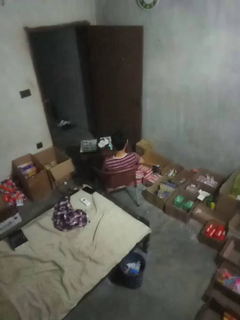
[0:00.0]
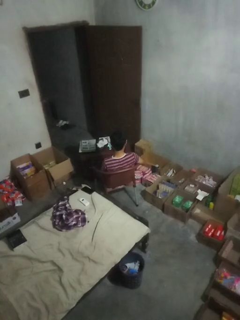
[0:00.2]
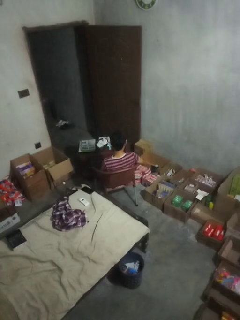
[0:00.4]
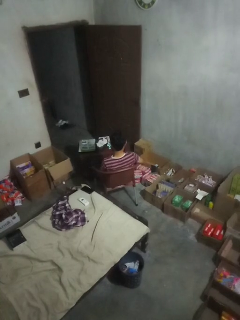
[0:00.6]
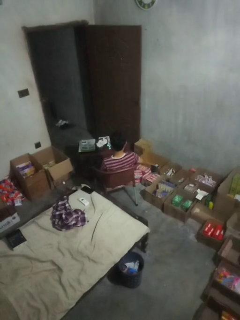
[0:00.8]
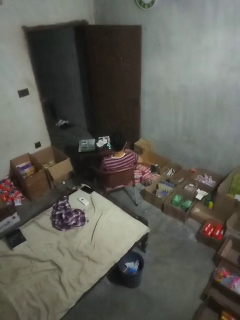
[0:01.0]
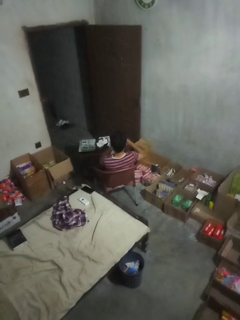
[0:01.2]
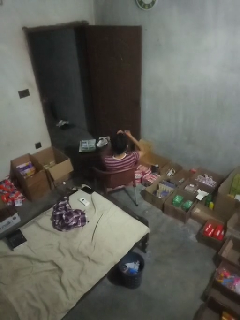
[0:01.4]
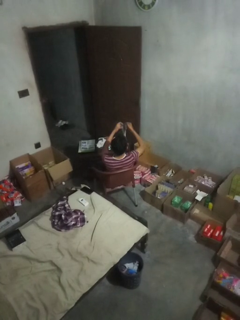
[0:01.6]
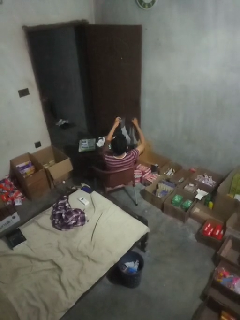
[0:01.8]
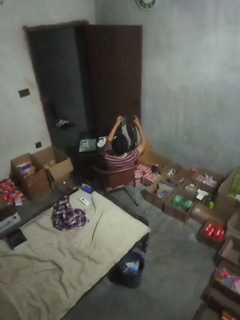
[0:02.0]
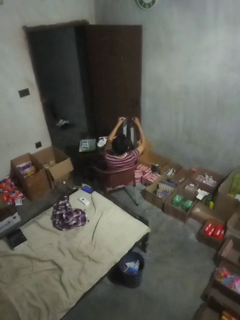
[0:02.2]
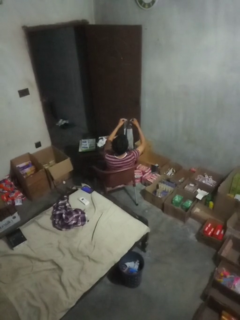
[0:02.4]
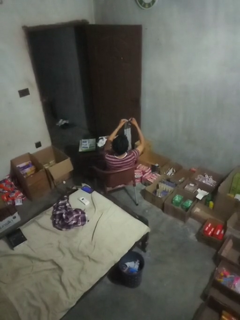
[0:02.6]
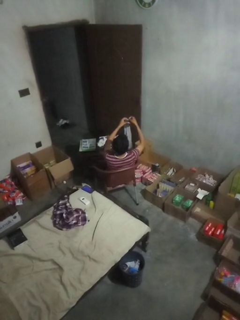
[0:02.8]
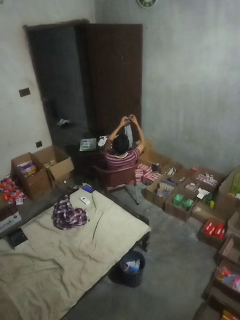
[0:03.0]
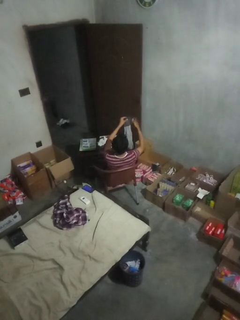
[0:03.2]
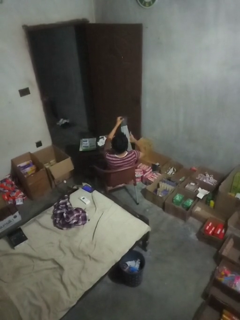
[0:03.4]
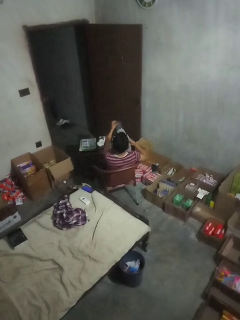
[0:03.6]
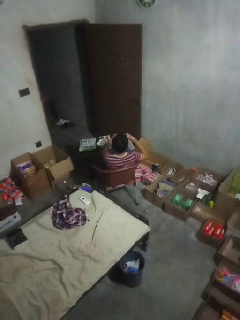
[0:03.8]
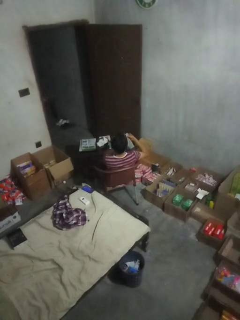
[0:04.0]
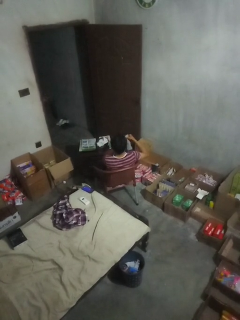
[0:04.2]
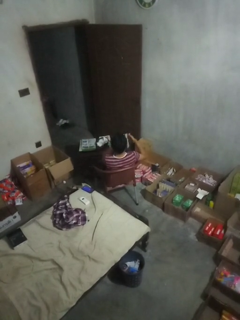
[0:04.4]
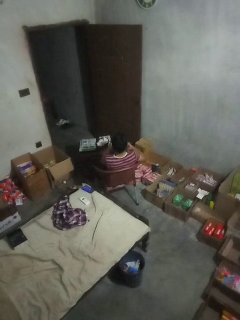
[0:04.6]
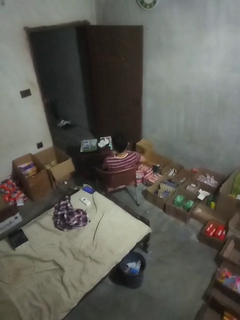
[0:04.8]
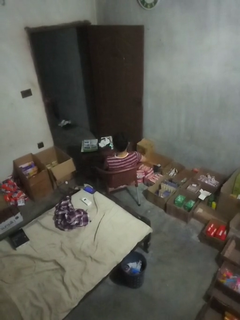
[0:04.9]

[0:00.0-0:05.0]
person folds socks

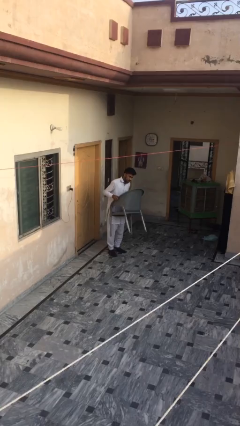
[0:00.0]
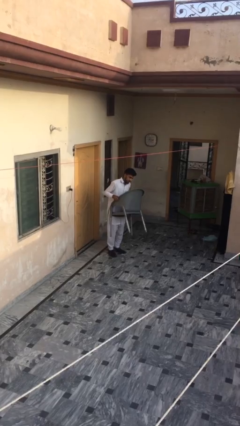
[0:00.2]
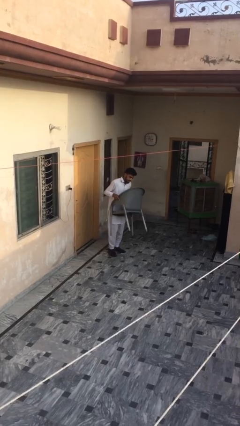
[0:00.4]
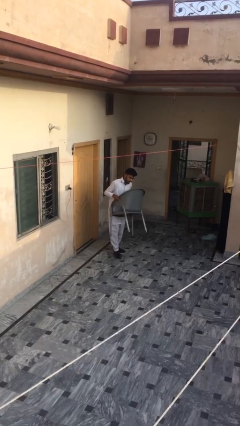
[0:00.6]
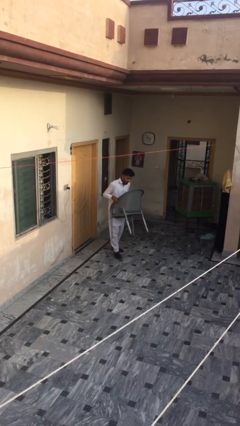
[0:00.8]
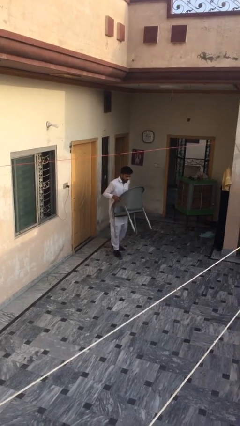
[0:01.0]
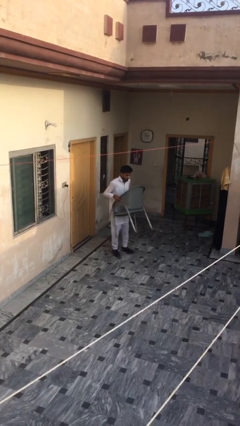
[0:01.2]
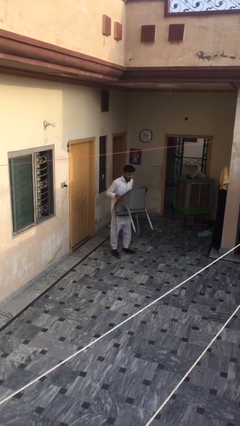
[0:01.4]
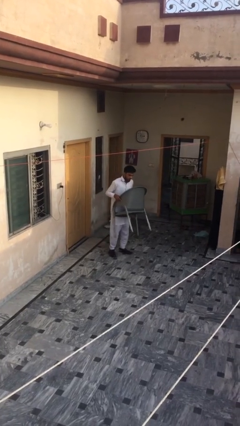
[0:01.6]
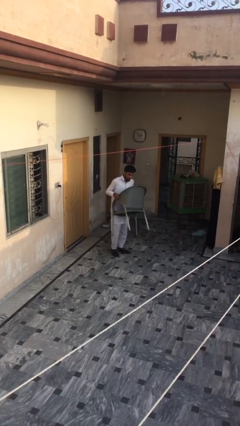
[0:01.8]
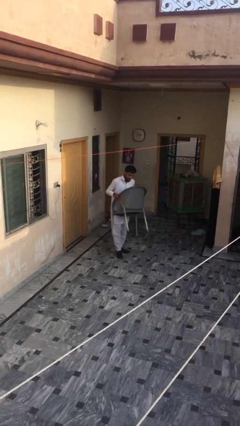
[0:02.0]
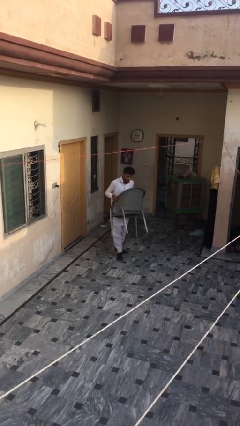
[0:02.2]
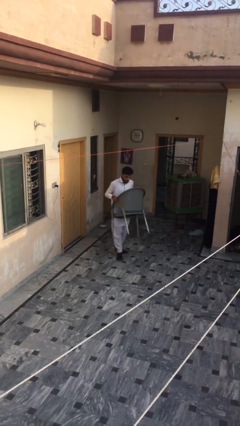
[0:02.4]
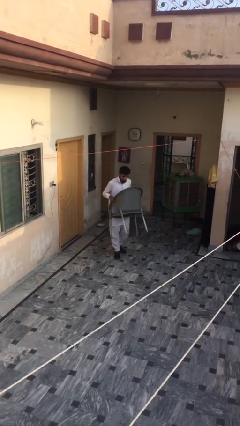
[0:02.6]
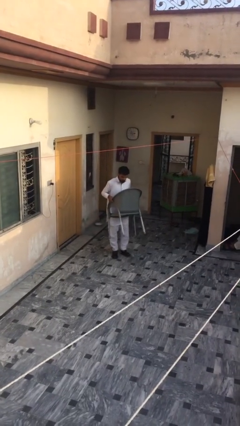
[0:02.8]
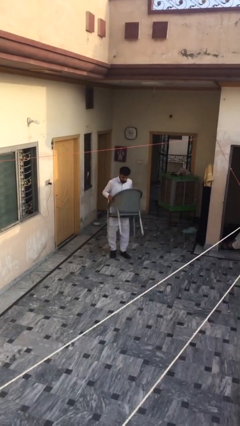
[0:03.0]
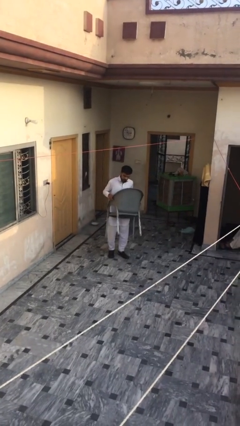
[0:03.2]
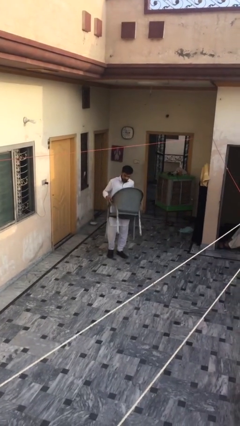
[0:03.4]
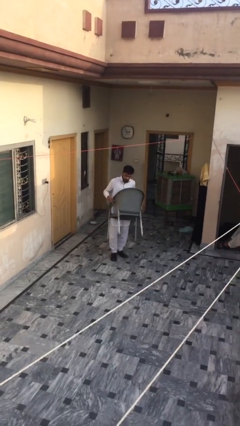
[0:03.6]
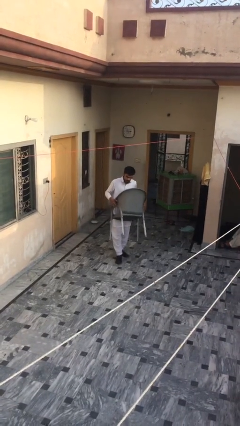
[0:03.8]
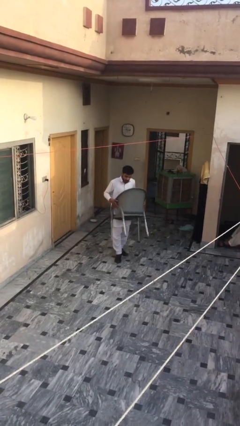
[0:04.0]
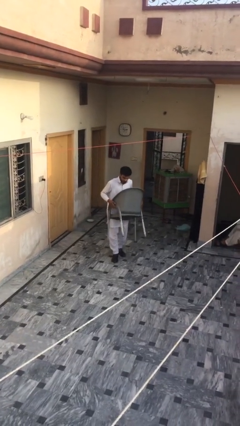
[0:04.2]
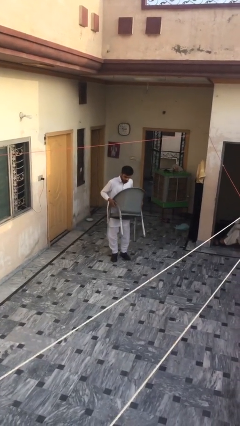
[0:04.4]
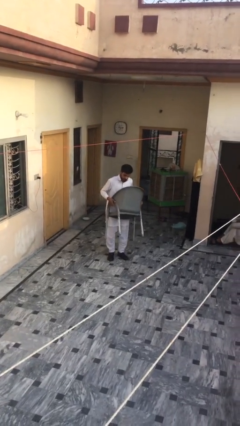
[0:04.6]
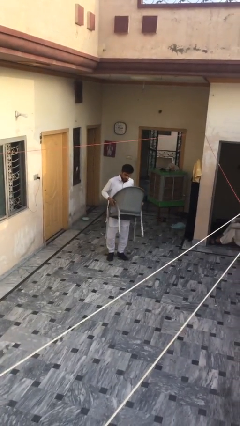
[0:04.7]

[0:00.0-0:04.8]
person carries heavy object

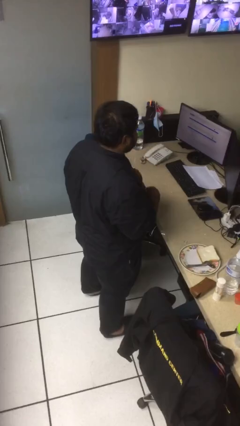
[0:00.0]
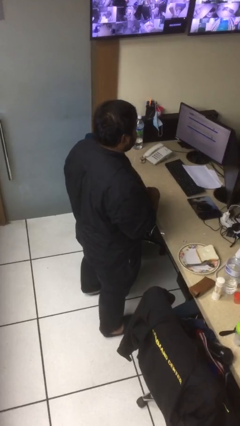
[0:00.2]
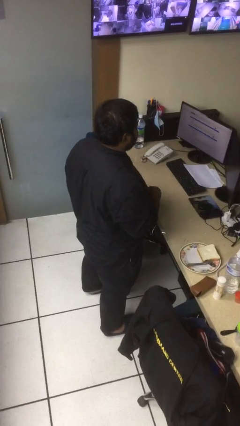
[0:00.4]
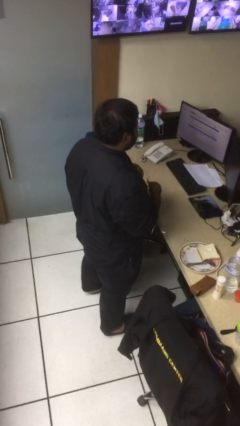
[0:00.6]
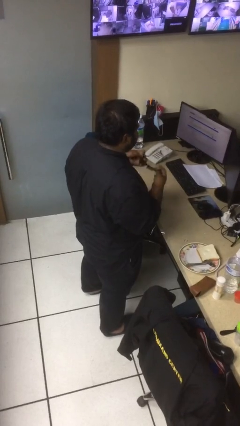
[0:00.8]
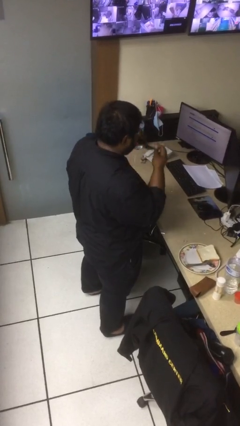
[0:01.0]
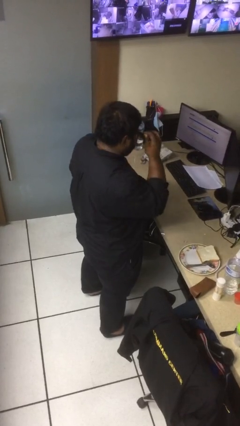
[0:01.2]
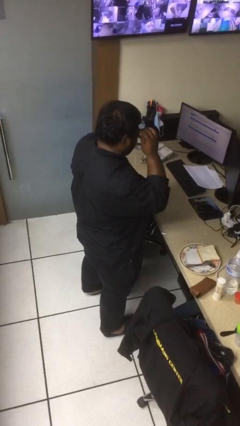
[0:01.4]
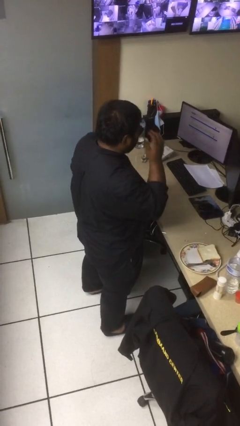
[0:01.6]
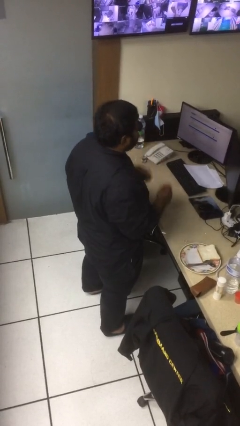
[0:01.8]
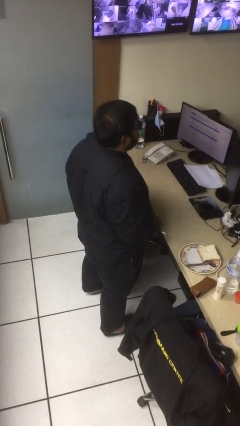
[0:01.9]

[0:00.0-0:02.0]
person puts on sunglasses

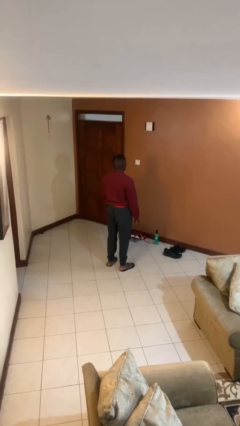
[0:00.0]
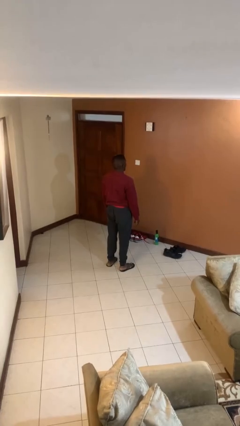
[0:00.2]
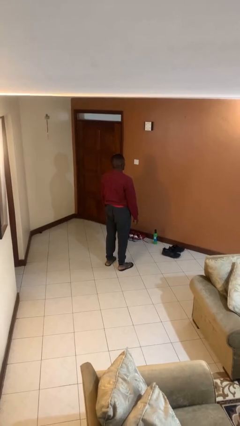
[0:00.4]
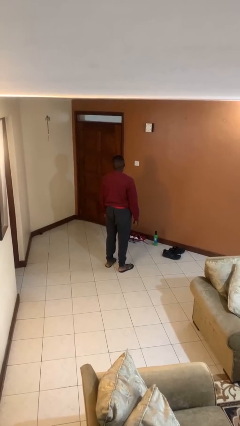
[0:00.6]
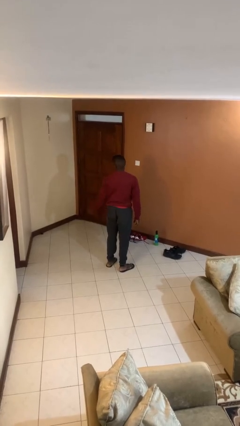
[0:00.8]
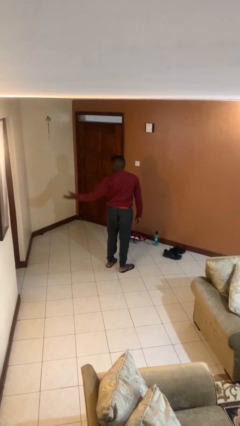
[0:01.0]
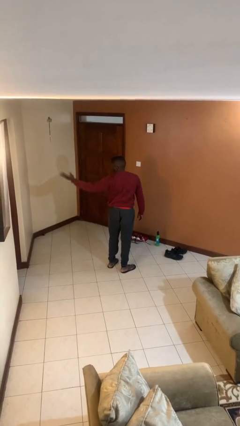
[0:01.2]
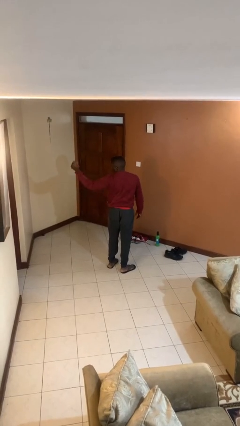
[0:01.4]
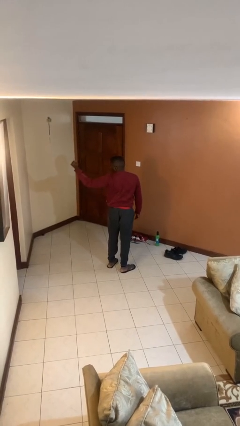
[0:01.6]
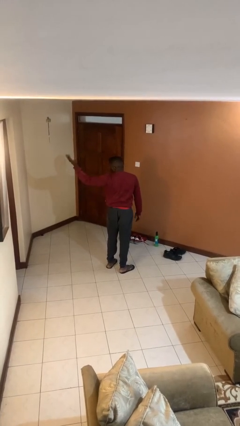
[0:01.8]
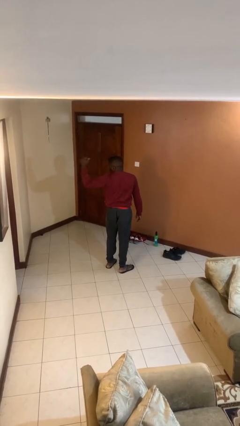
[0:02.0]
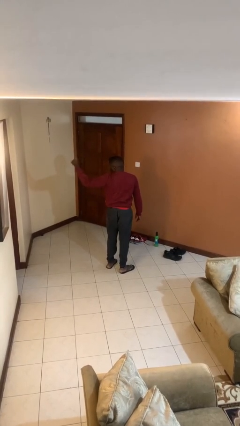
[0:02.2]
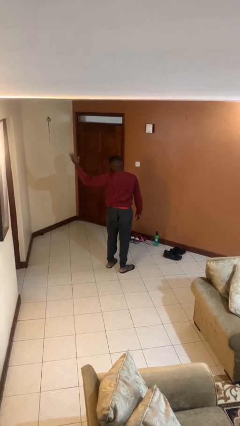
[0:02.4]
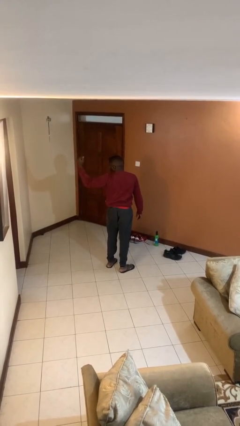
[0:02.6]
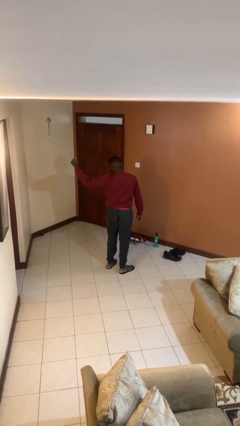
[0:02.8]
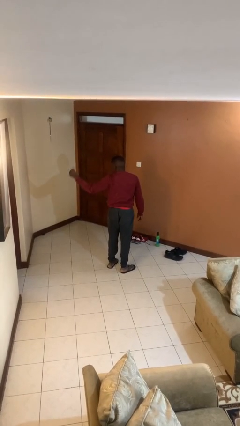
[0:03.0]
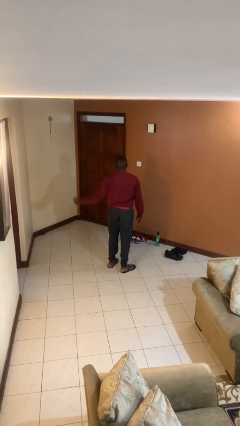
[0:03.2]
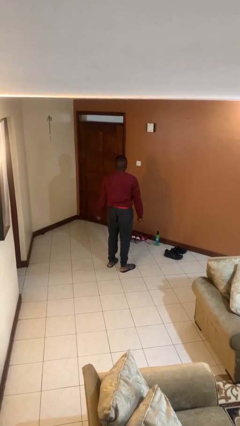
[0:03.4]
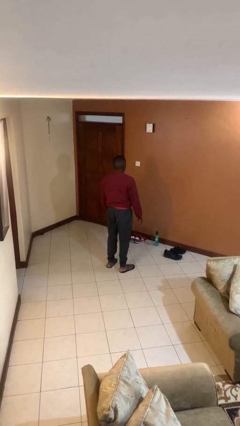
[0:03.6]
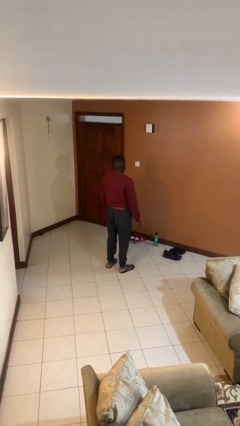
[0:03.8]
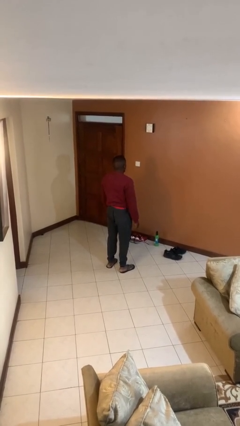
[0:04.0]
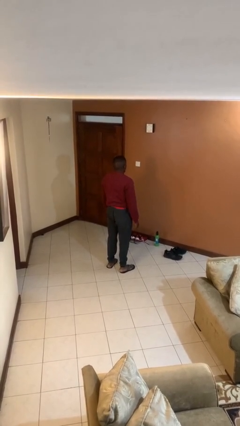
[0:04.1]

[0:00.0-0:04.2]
person gestures come here

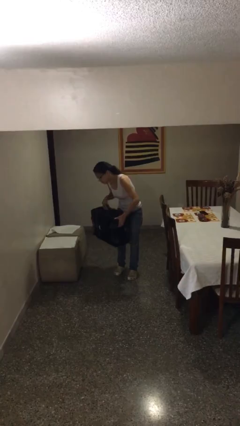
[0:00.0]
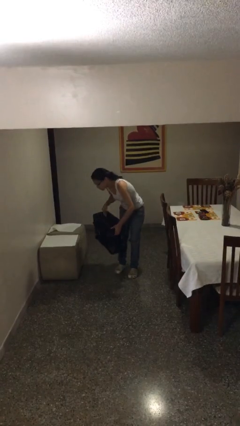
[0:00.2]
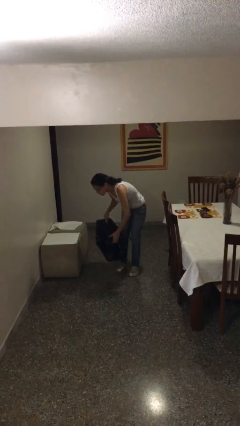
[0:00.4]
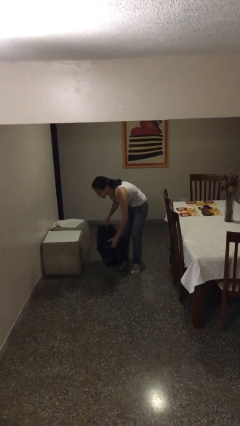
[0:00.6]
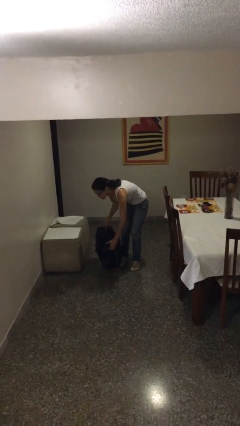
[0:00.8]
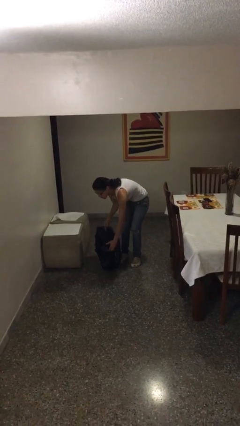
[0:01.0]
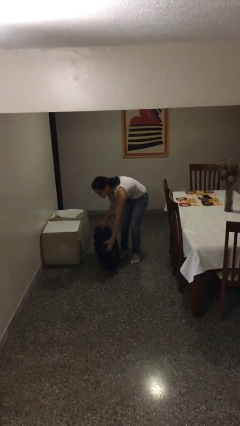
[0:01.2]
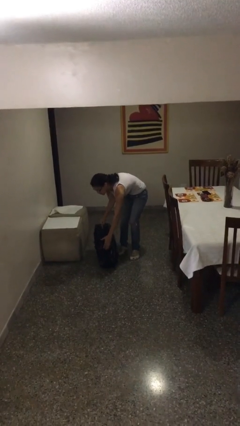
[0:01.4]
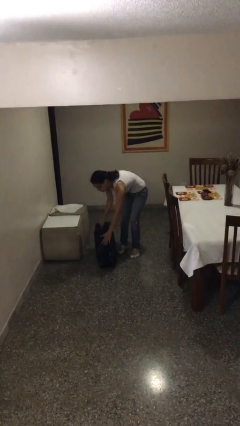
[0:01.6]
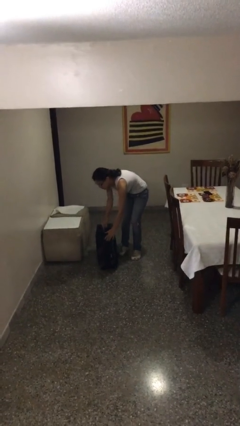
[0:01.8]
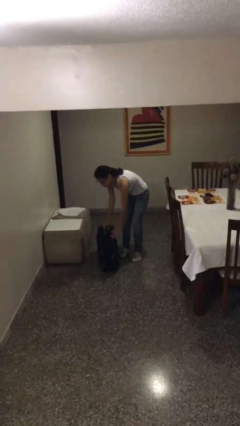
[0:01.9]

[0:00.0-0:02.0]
person puts down object on floor

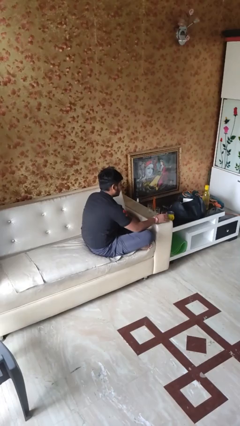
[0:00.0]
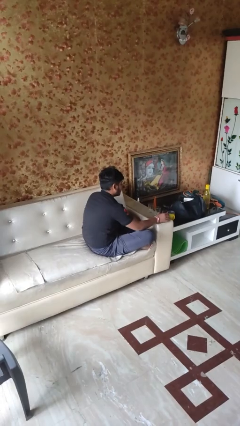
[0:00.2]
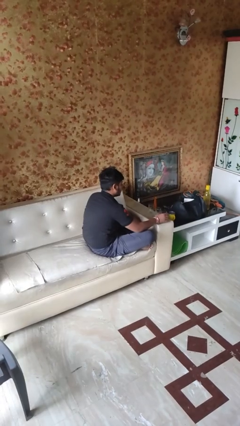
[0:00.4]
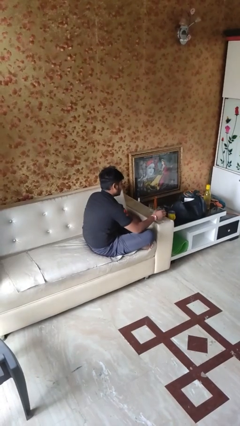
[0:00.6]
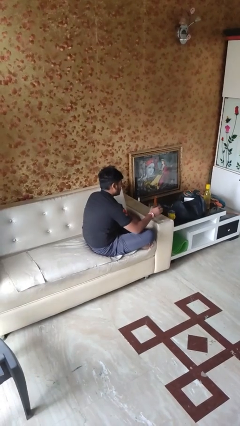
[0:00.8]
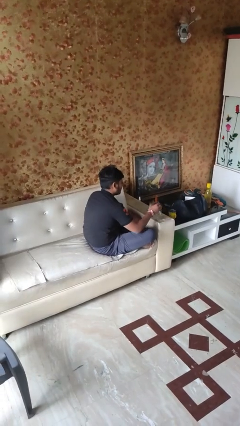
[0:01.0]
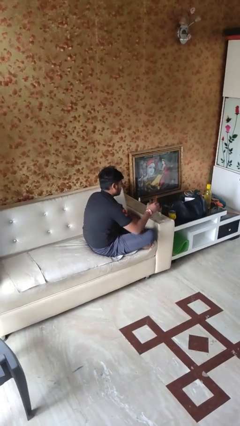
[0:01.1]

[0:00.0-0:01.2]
person picks up object from table
